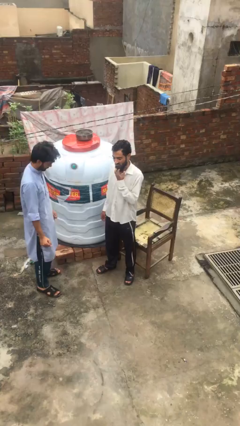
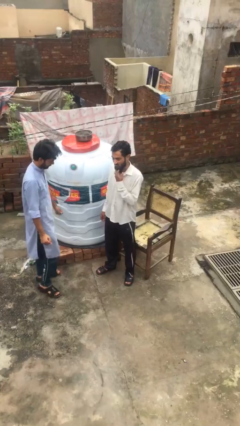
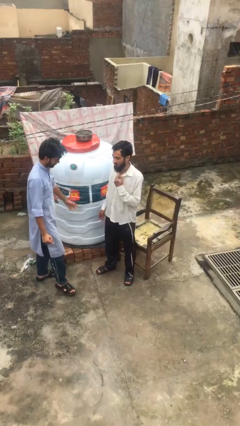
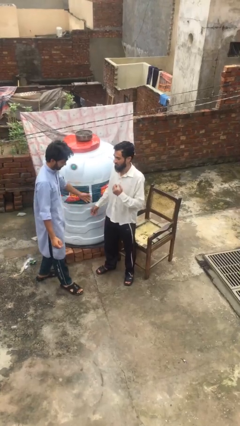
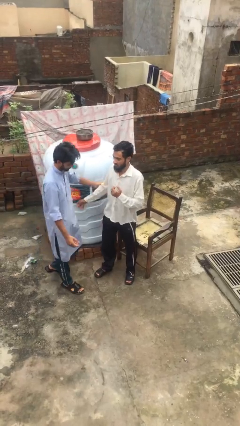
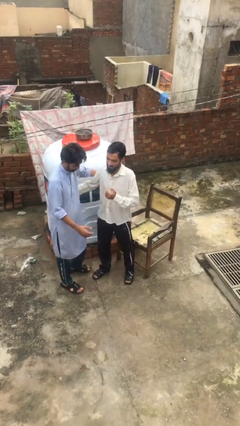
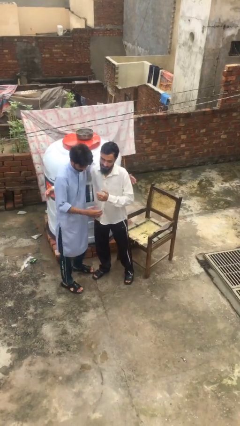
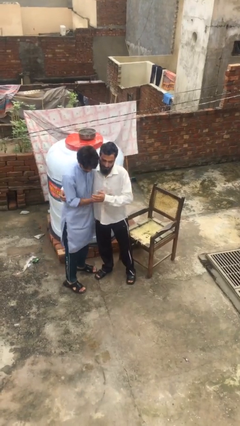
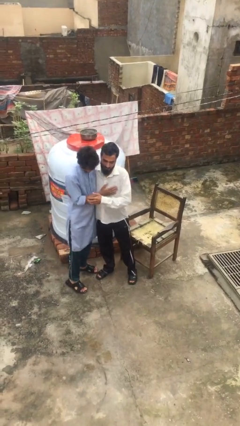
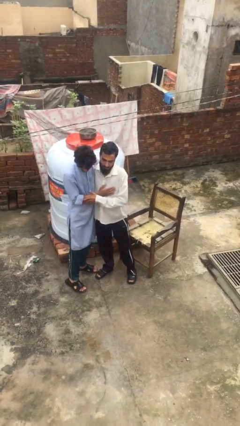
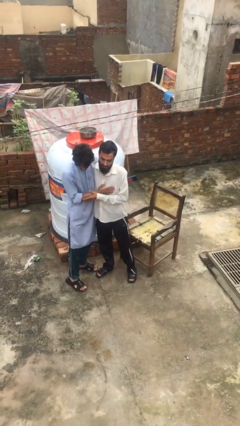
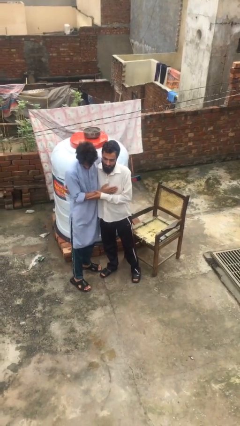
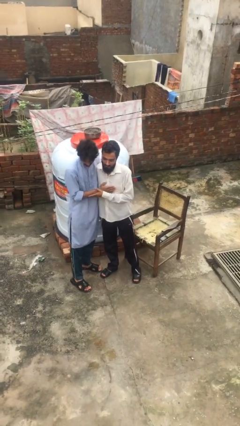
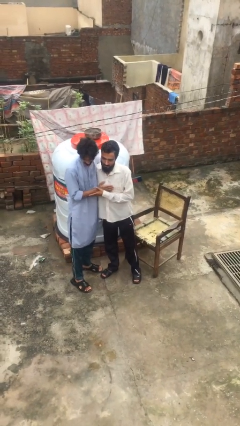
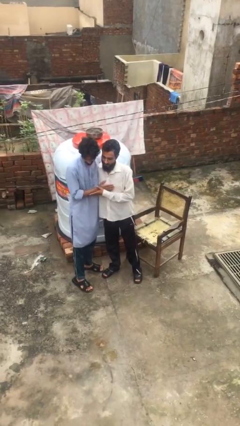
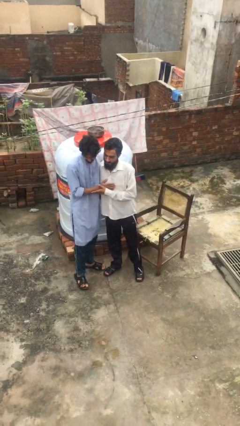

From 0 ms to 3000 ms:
person embraces person

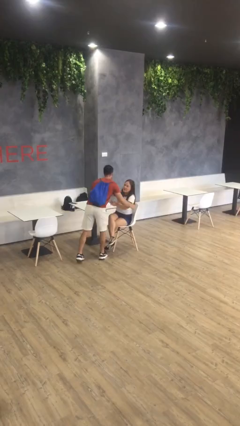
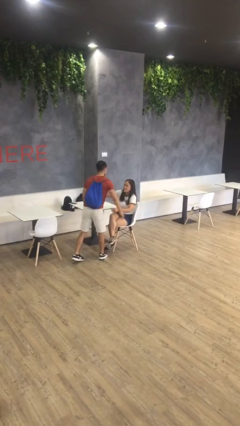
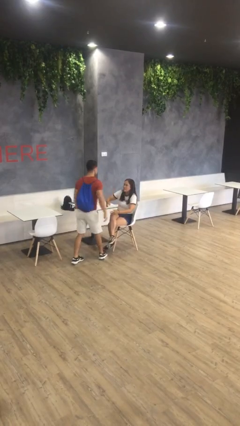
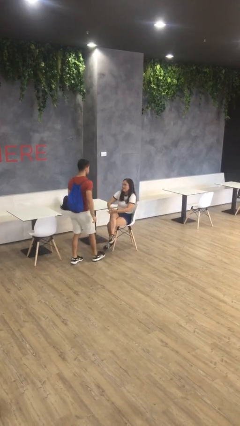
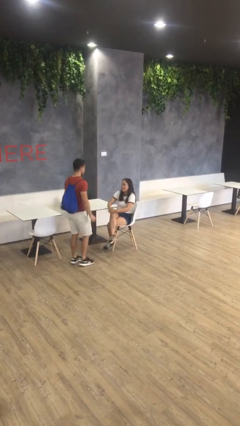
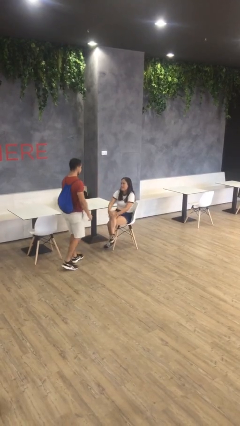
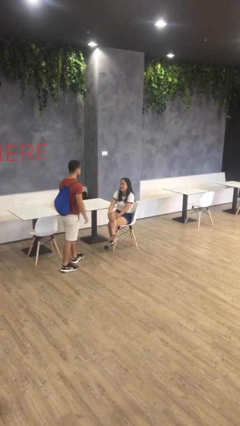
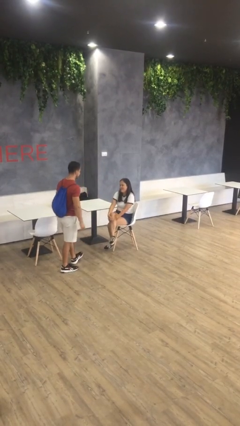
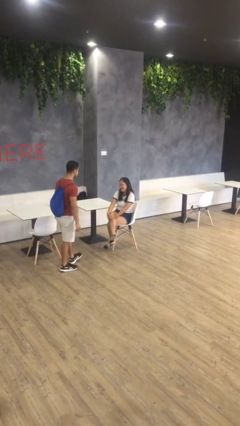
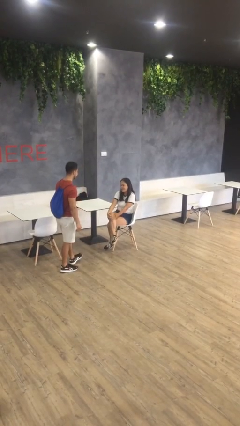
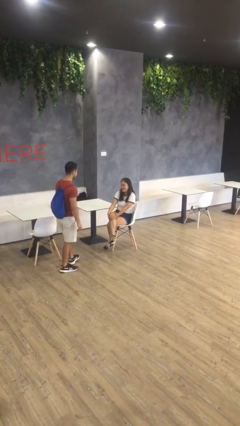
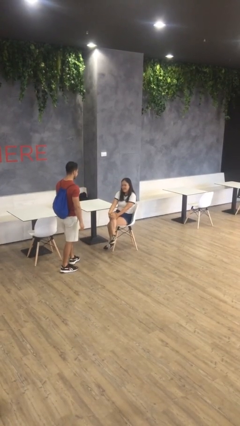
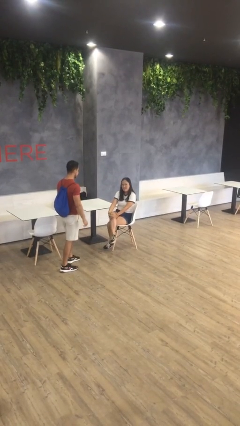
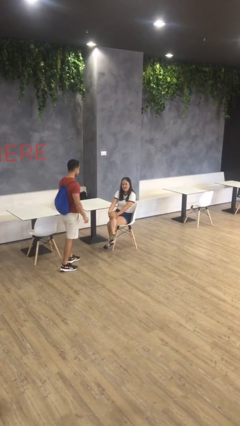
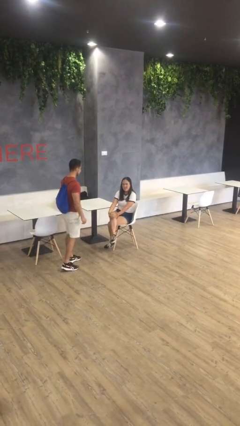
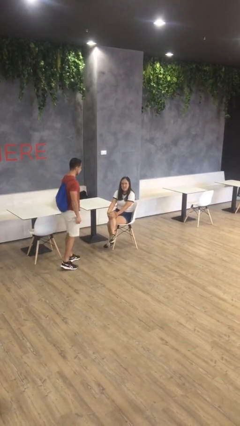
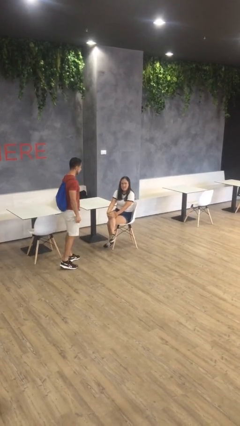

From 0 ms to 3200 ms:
person talks to person

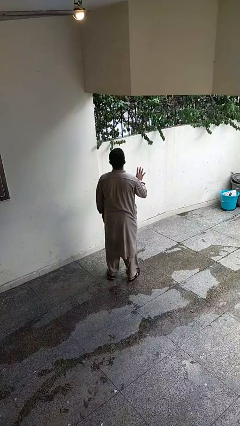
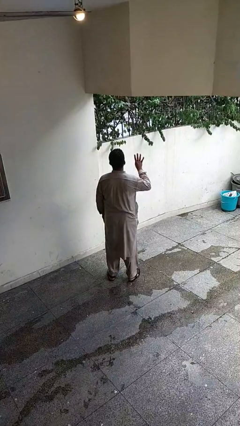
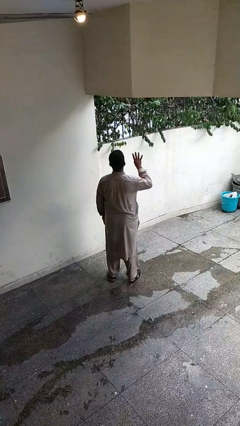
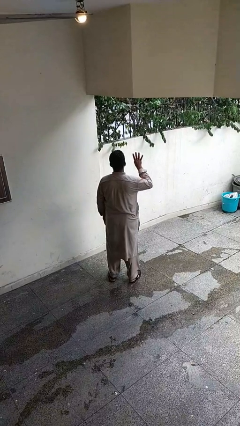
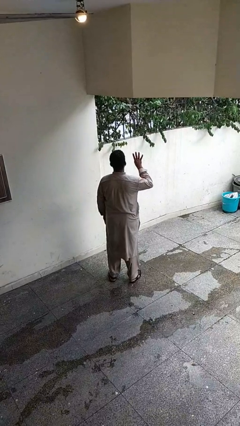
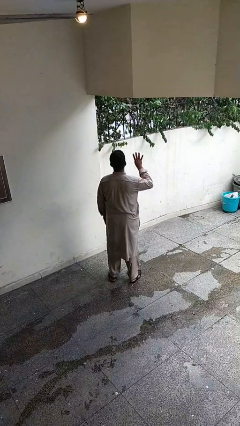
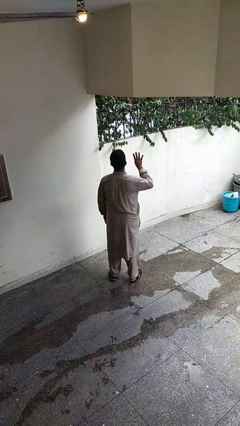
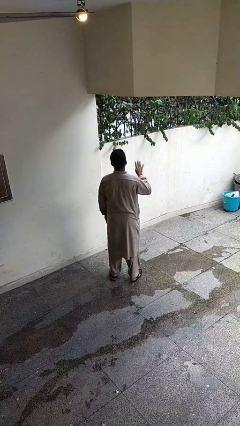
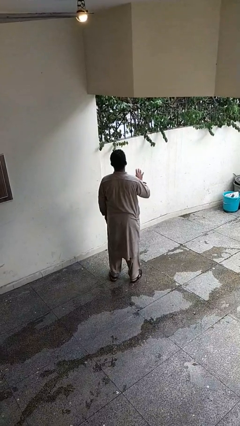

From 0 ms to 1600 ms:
person gestures number four

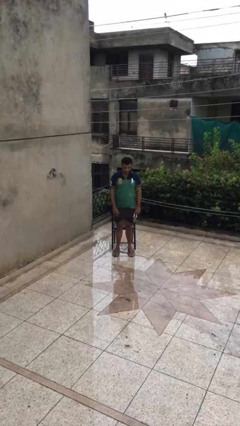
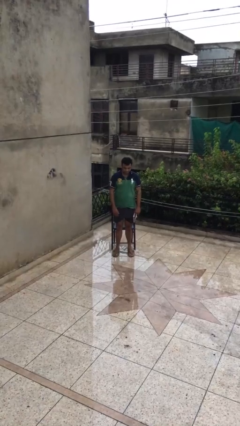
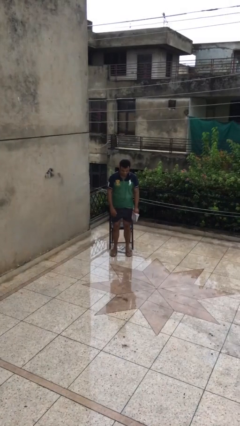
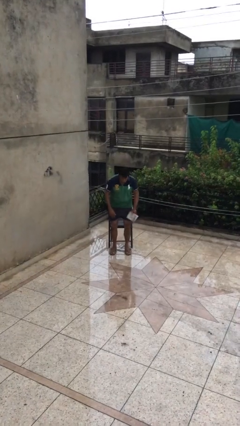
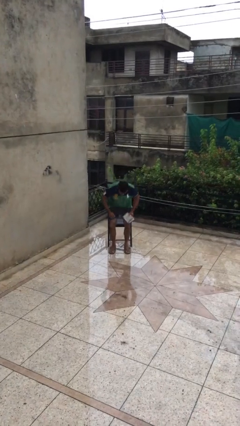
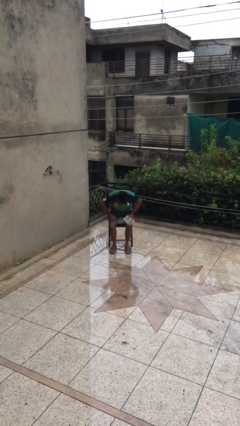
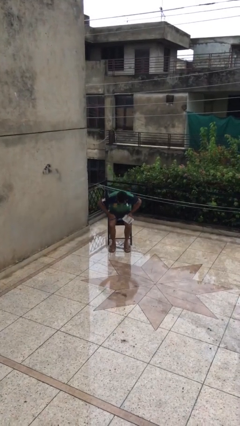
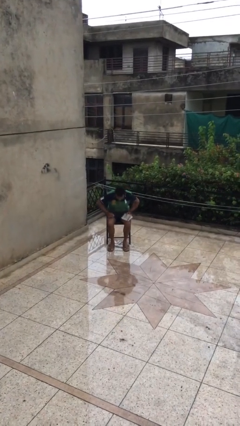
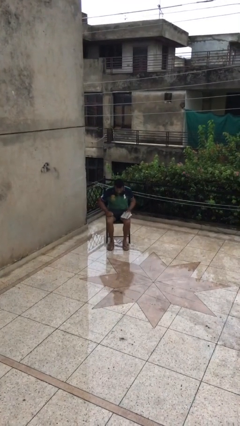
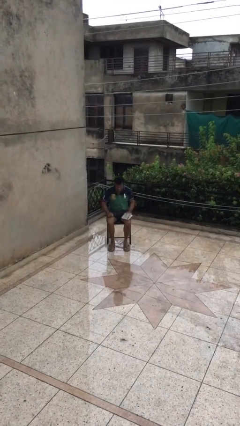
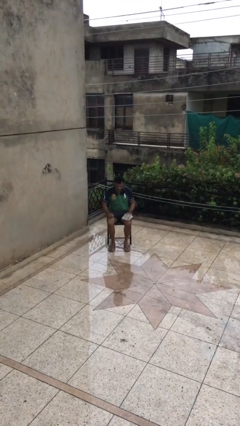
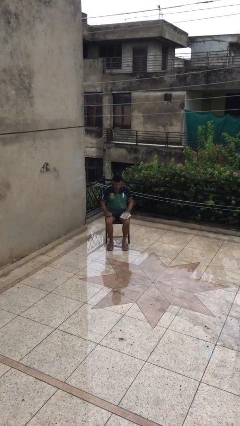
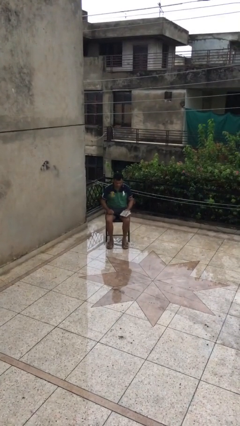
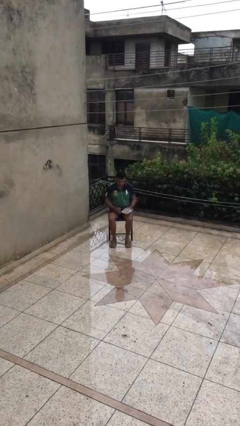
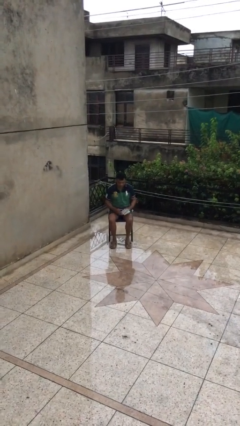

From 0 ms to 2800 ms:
person sits down

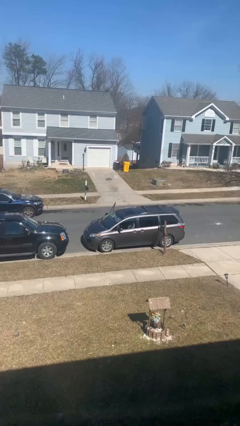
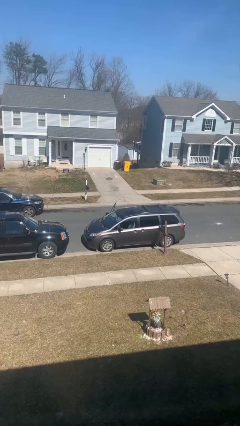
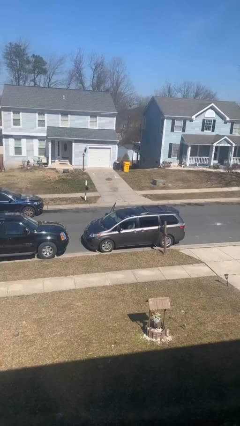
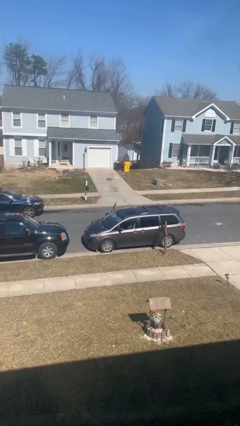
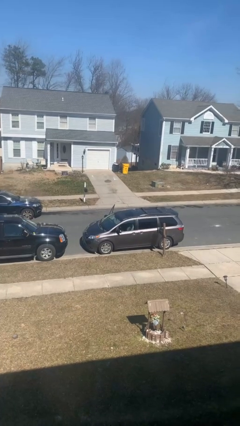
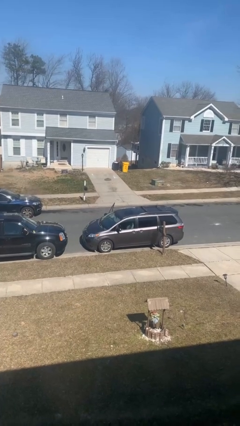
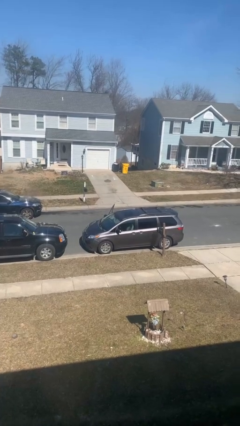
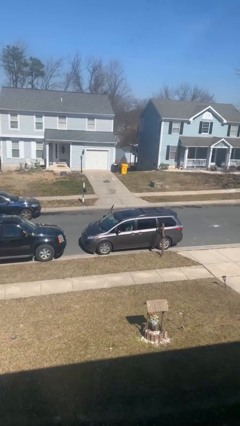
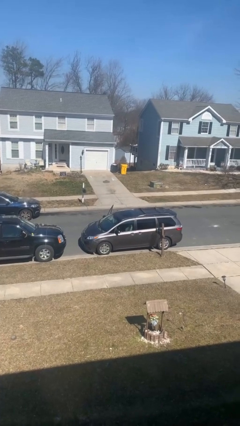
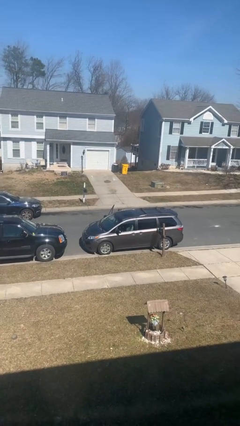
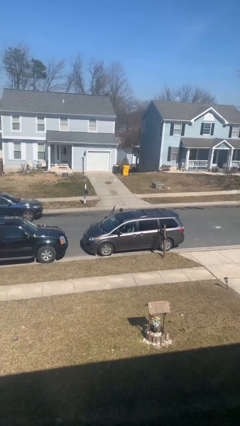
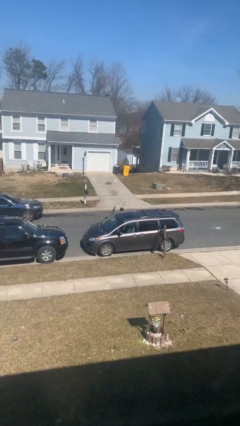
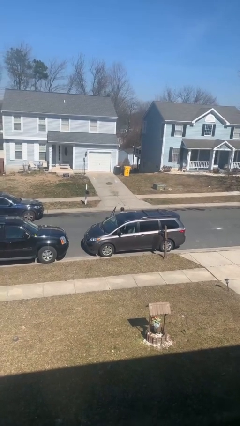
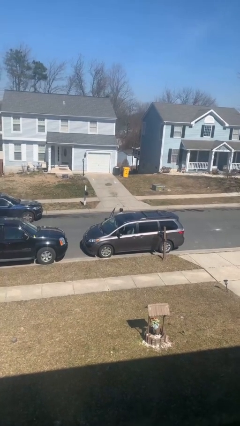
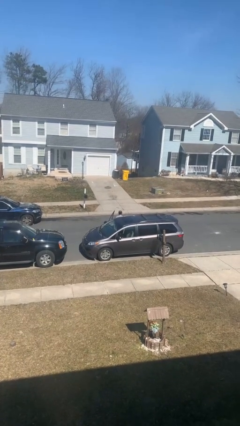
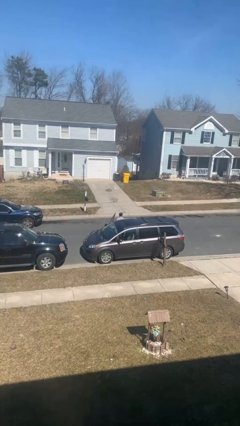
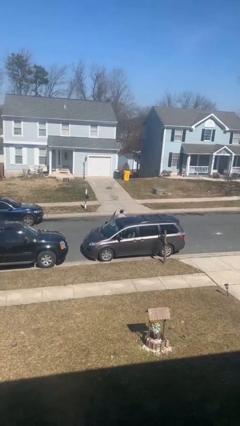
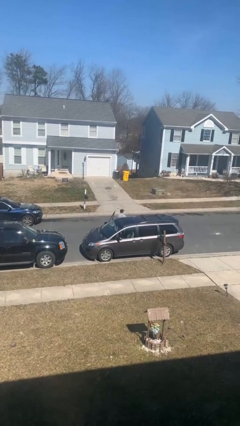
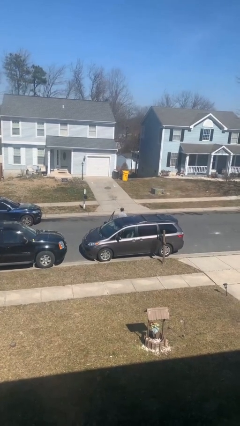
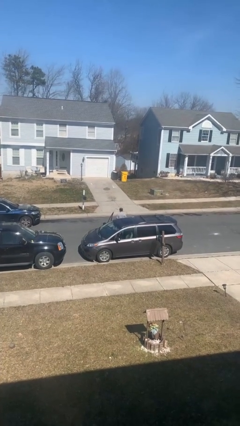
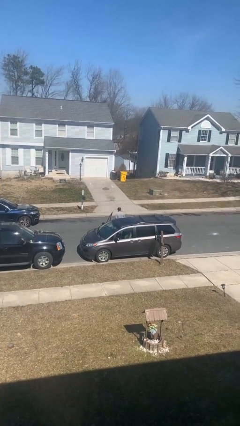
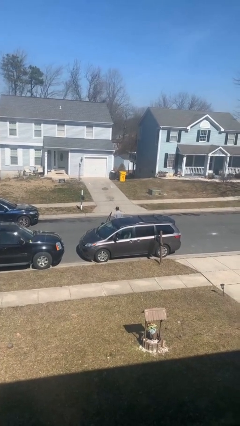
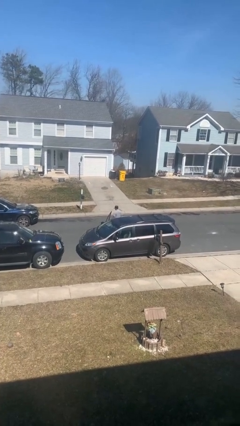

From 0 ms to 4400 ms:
person exits car

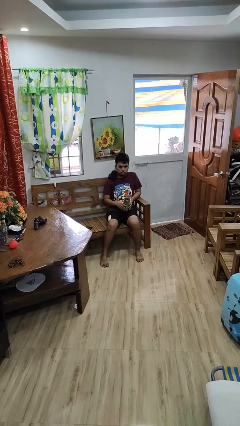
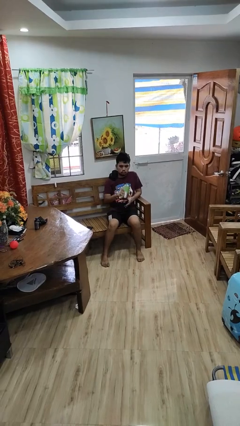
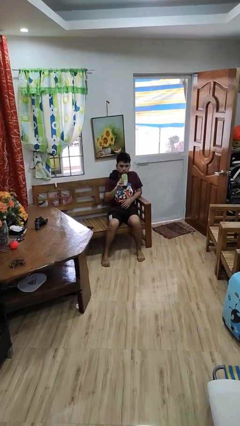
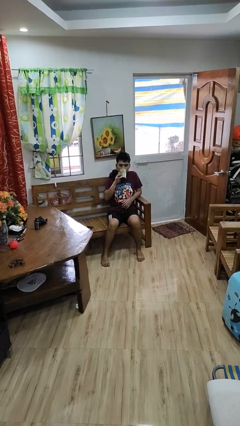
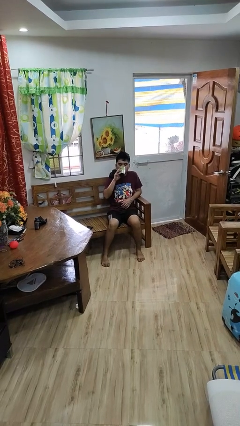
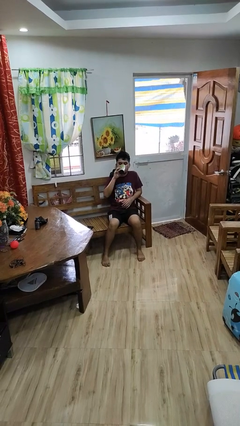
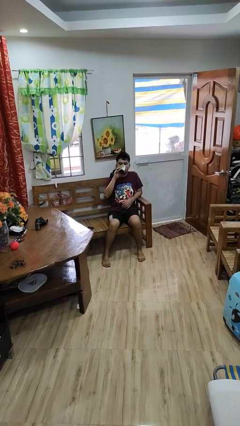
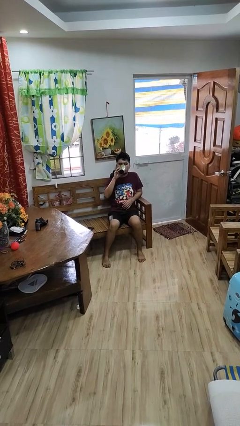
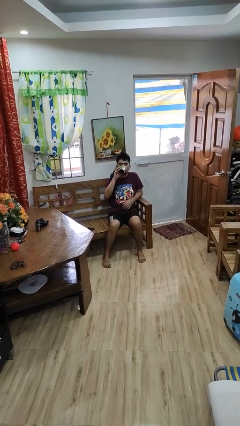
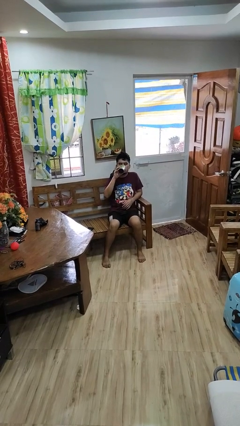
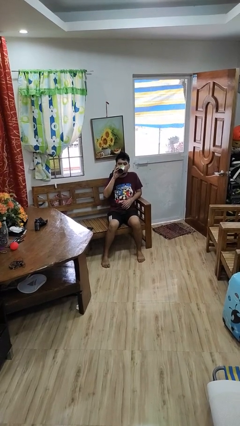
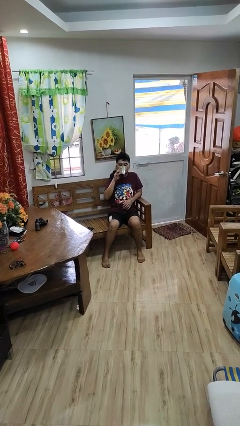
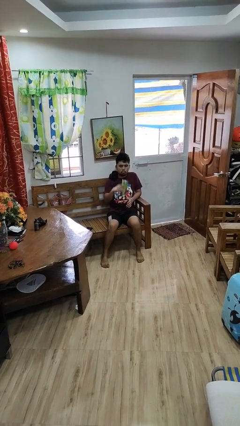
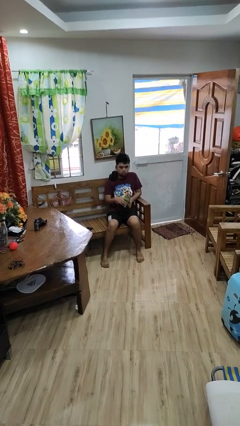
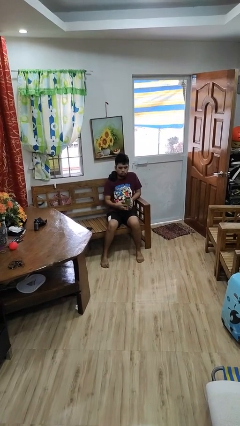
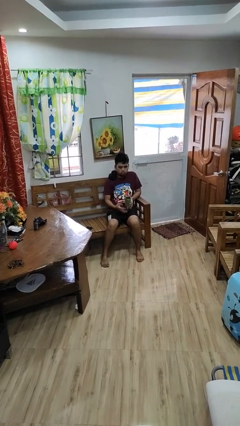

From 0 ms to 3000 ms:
person drinks from bottle
